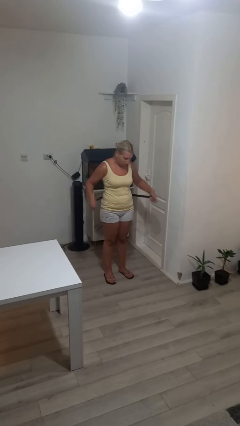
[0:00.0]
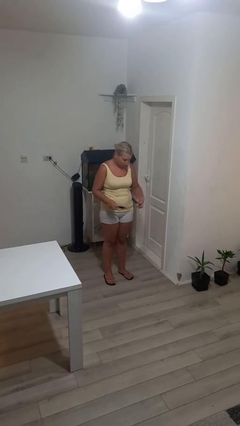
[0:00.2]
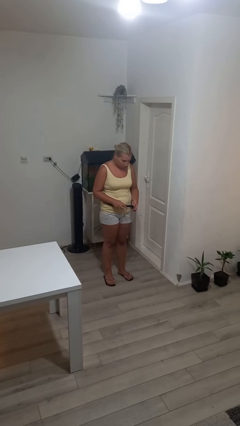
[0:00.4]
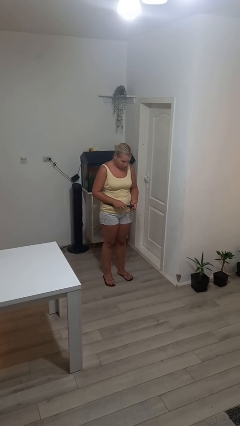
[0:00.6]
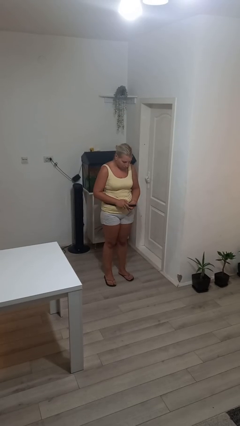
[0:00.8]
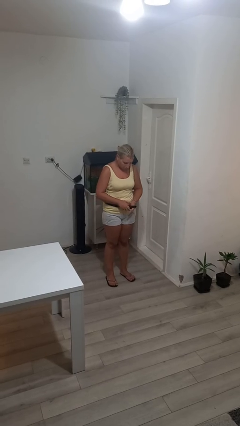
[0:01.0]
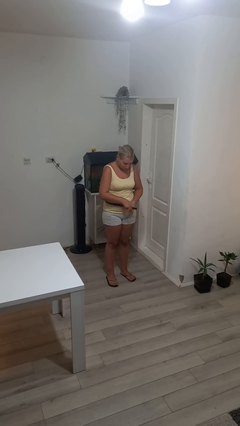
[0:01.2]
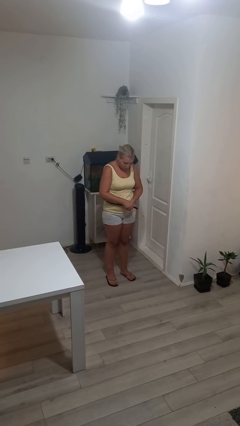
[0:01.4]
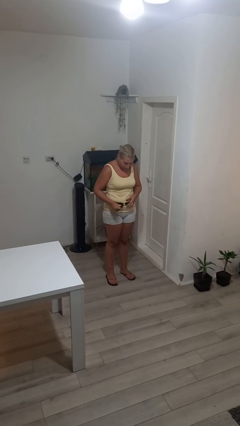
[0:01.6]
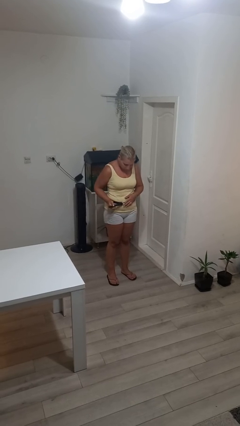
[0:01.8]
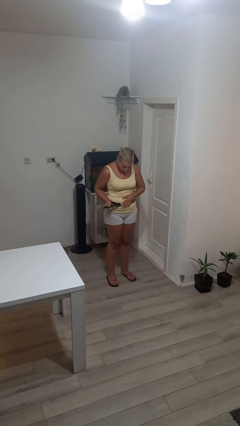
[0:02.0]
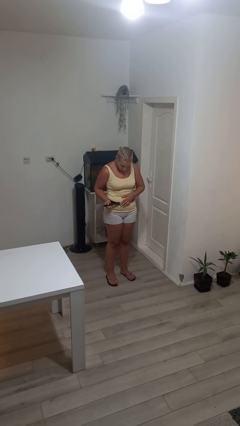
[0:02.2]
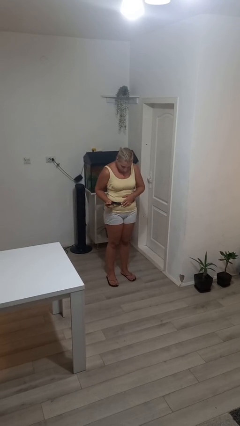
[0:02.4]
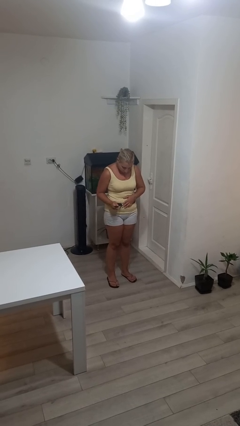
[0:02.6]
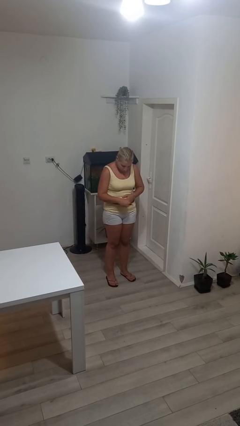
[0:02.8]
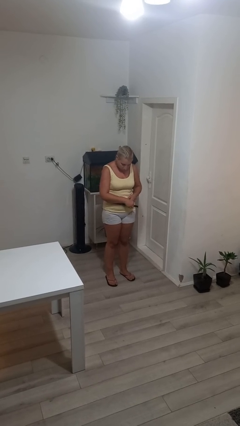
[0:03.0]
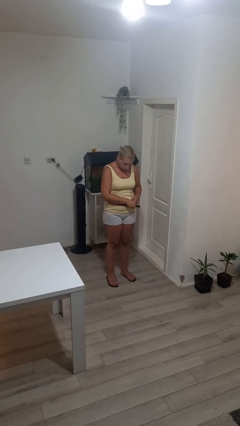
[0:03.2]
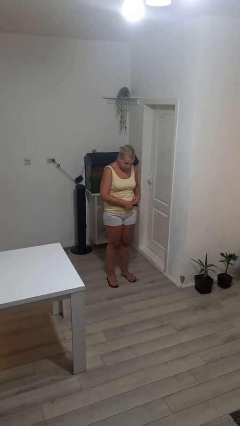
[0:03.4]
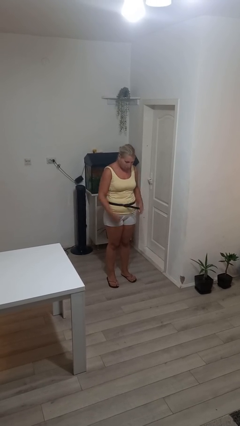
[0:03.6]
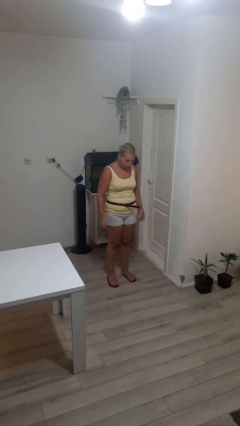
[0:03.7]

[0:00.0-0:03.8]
person puts on belt

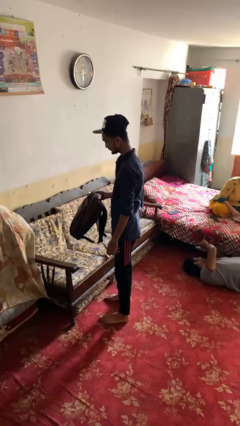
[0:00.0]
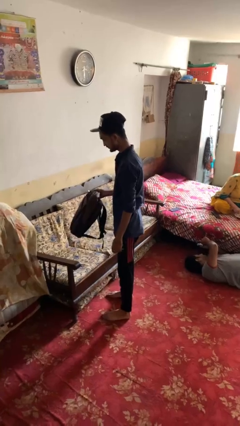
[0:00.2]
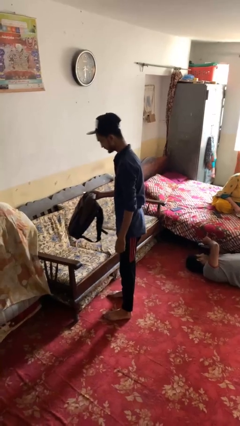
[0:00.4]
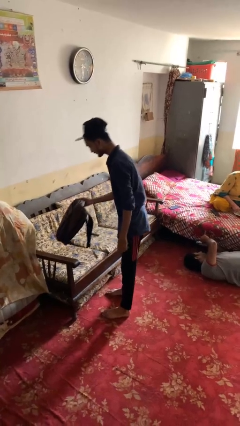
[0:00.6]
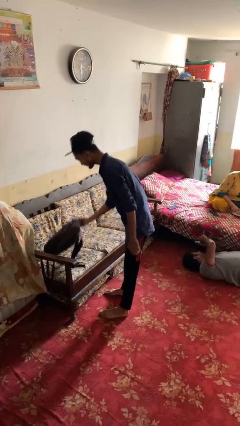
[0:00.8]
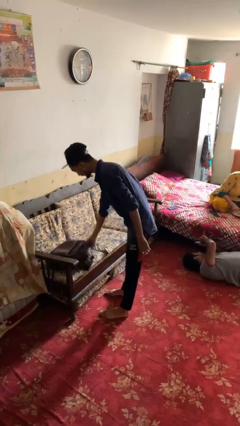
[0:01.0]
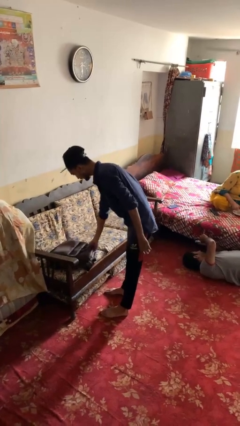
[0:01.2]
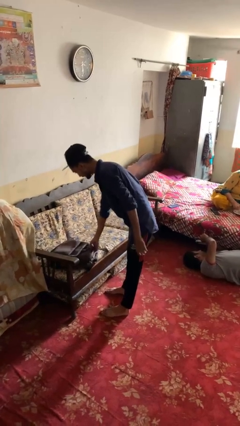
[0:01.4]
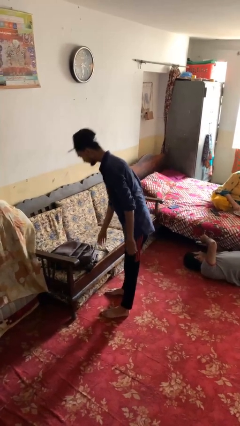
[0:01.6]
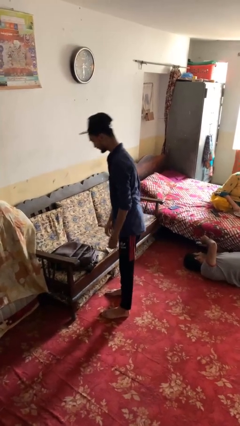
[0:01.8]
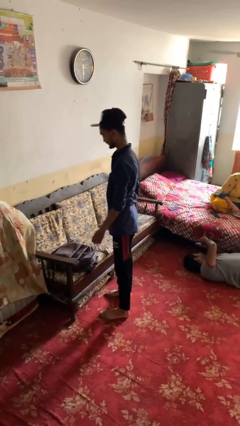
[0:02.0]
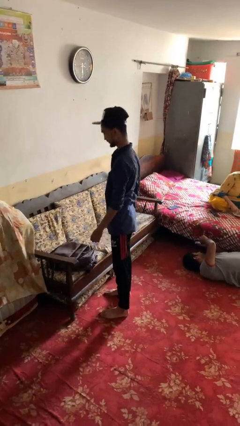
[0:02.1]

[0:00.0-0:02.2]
person puts down object on couch

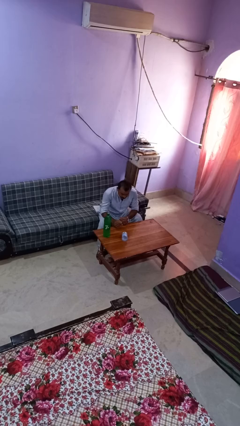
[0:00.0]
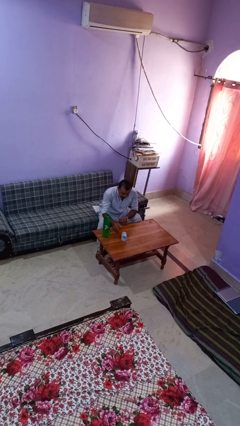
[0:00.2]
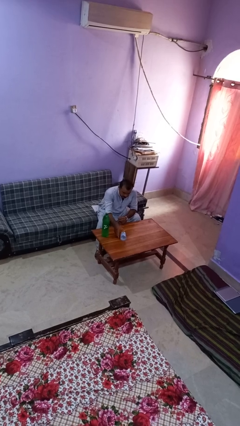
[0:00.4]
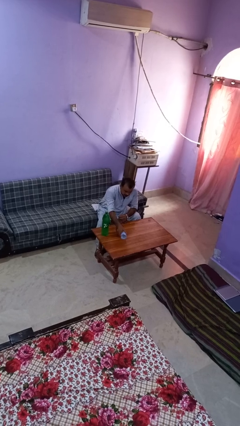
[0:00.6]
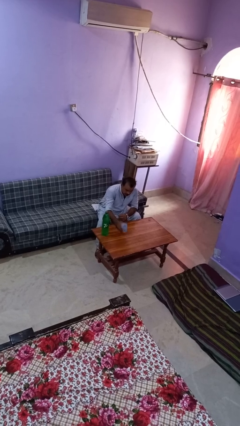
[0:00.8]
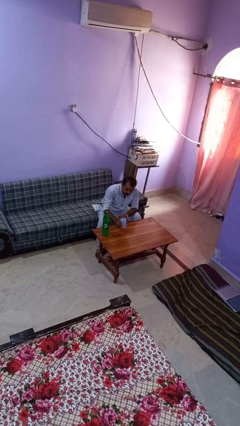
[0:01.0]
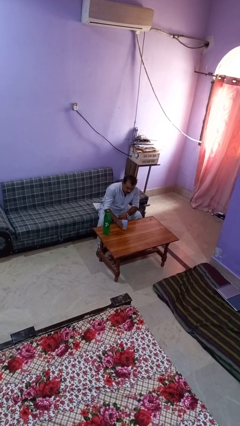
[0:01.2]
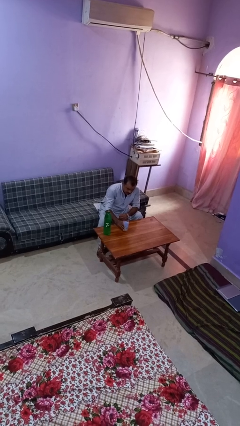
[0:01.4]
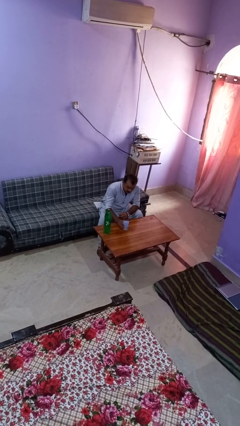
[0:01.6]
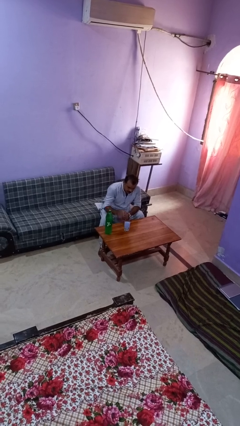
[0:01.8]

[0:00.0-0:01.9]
person sets upright glass

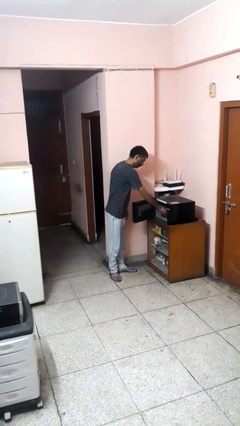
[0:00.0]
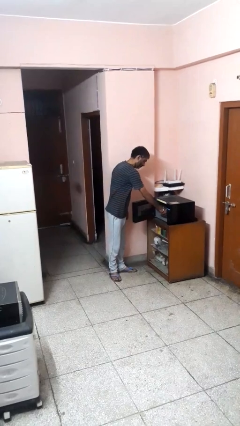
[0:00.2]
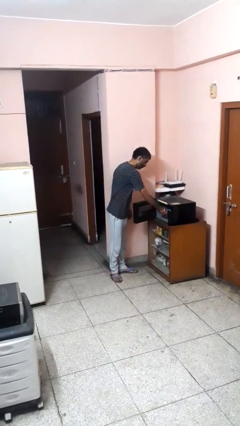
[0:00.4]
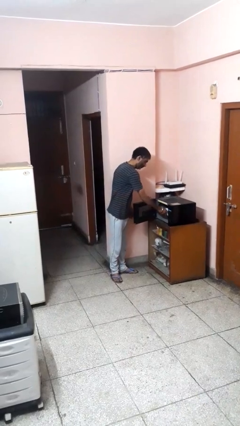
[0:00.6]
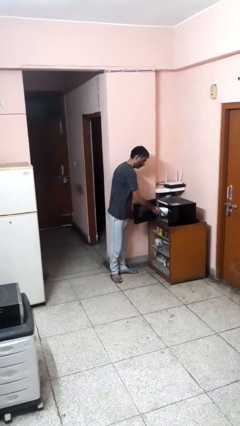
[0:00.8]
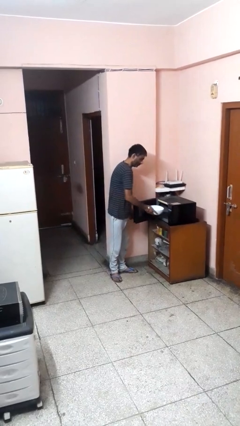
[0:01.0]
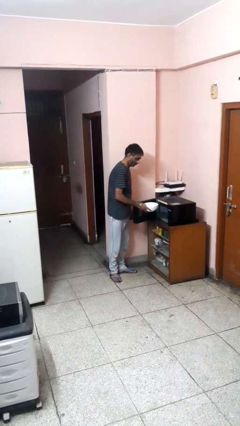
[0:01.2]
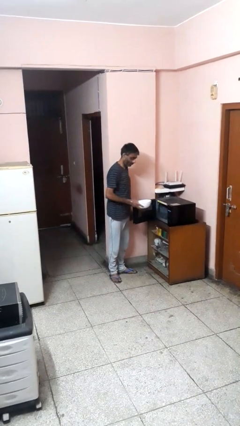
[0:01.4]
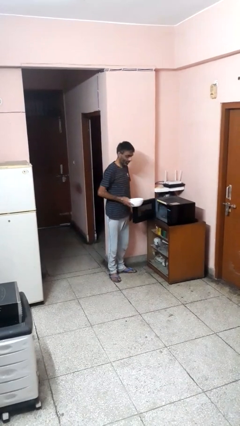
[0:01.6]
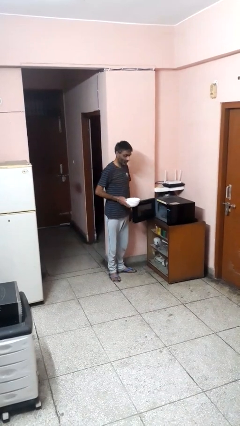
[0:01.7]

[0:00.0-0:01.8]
person takes object from microwave

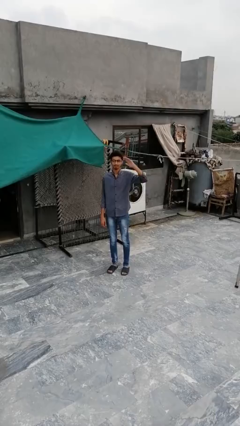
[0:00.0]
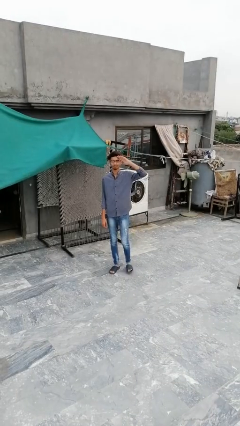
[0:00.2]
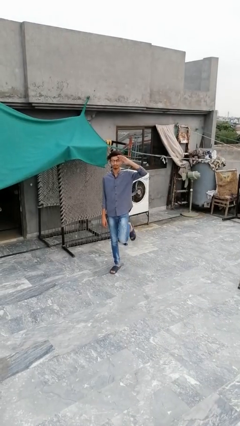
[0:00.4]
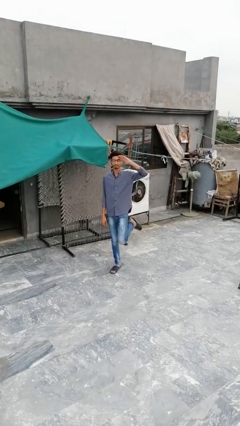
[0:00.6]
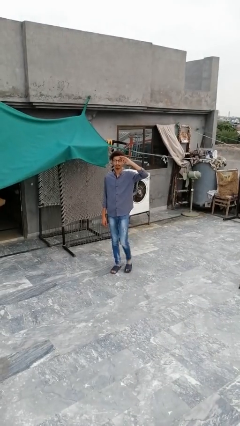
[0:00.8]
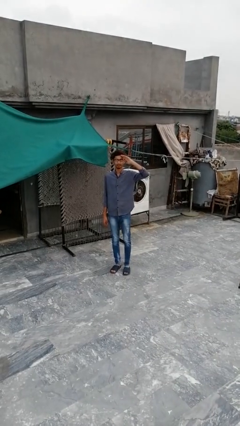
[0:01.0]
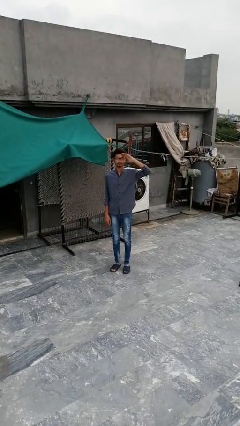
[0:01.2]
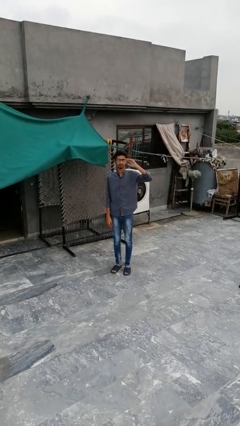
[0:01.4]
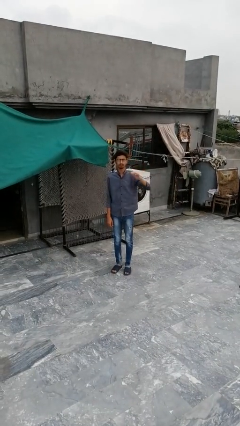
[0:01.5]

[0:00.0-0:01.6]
person salutes

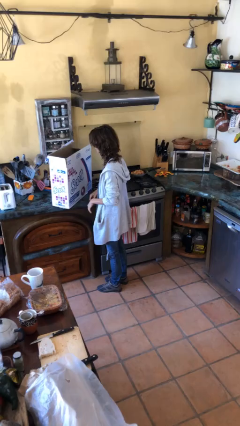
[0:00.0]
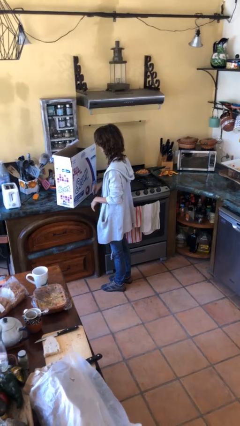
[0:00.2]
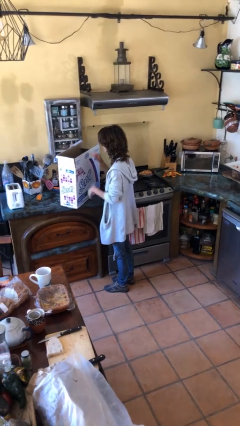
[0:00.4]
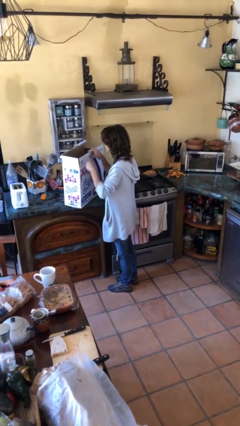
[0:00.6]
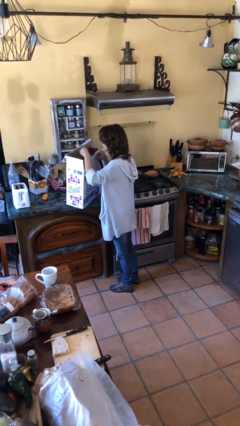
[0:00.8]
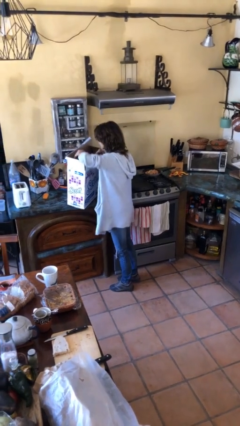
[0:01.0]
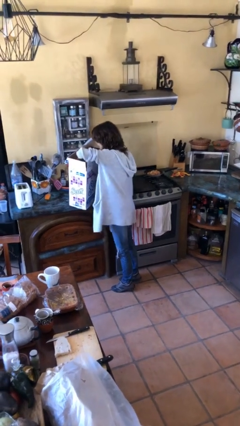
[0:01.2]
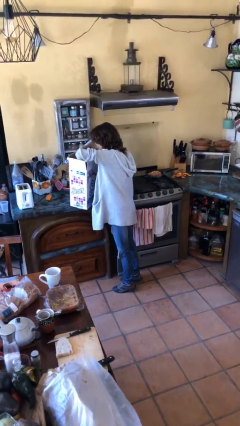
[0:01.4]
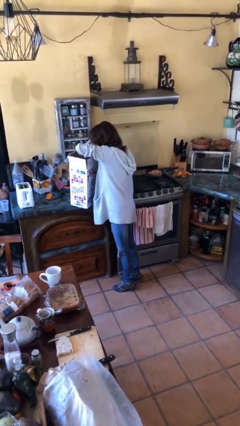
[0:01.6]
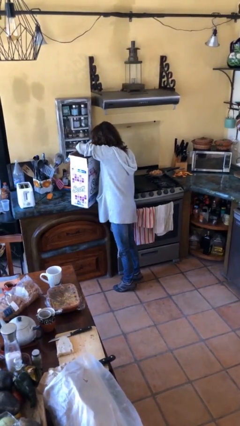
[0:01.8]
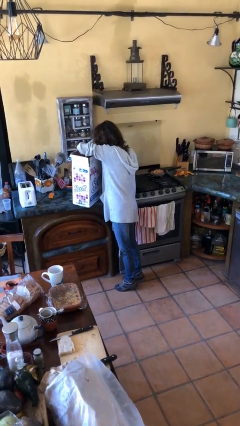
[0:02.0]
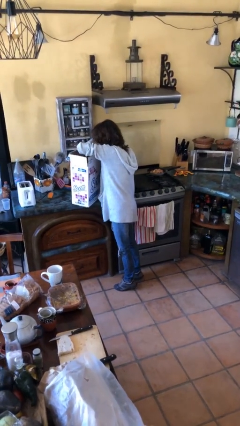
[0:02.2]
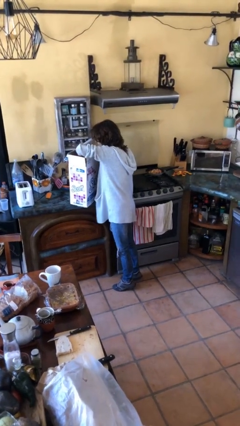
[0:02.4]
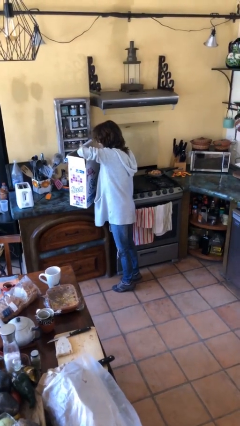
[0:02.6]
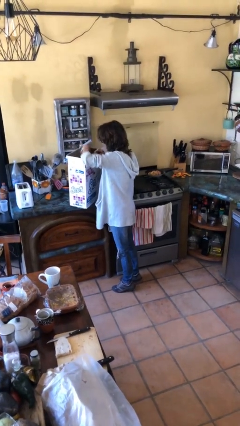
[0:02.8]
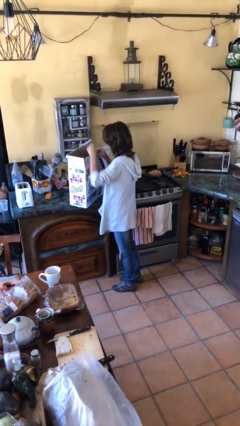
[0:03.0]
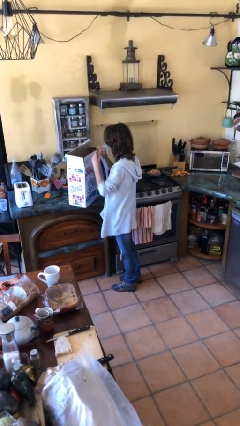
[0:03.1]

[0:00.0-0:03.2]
person searches in box

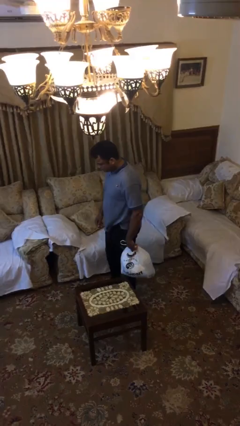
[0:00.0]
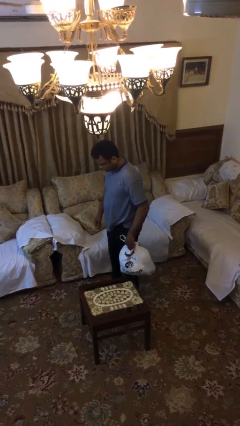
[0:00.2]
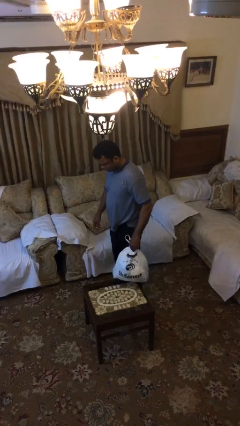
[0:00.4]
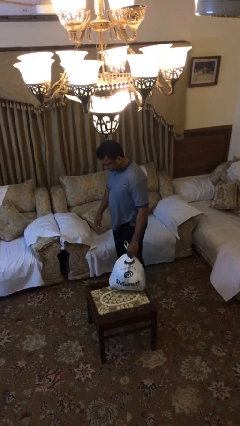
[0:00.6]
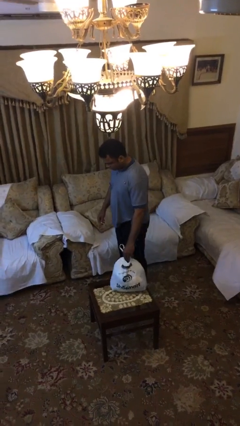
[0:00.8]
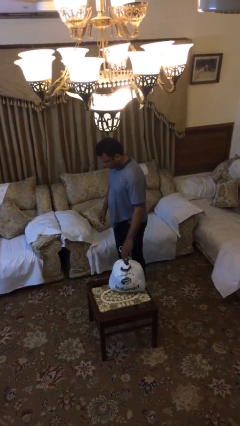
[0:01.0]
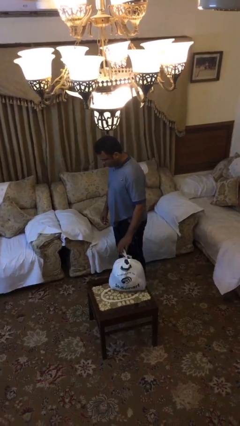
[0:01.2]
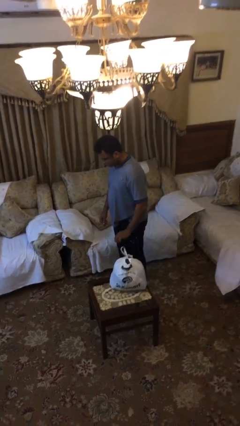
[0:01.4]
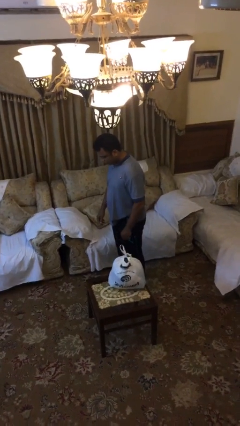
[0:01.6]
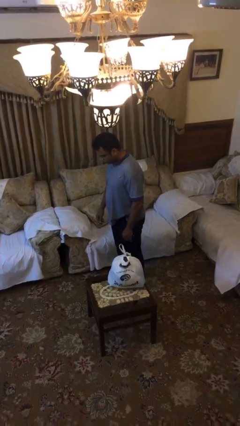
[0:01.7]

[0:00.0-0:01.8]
person puts down object on table

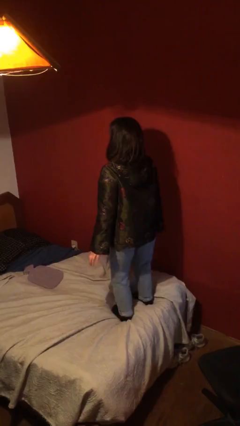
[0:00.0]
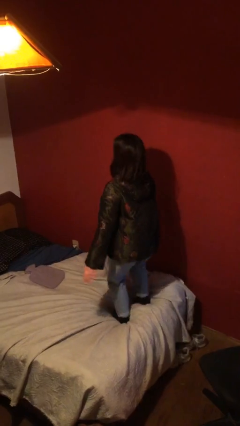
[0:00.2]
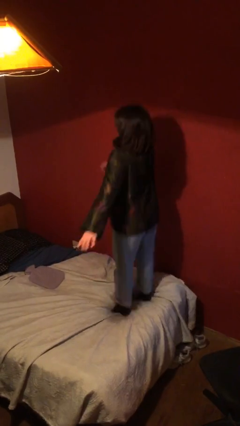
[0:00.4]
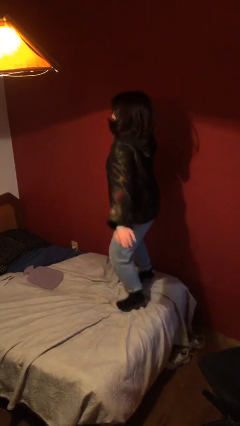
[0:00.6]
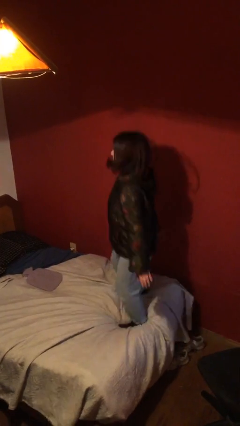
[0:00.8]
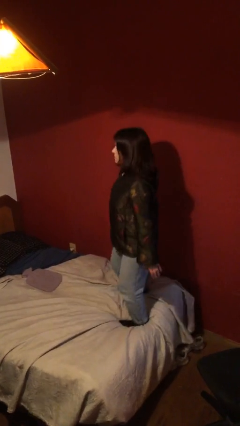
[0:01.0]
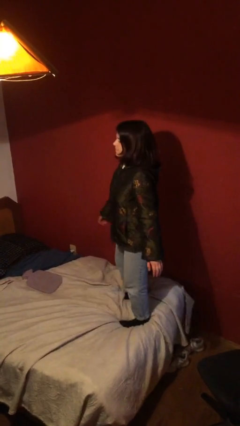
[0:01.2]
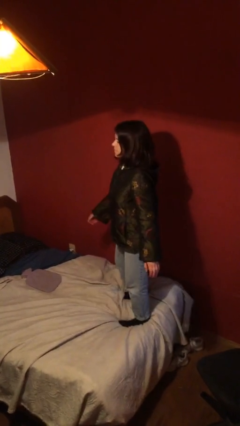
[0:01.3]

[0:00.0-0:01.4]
person jumps on bed
